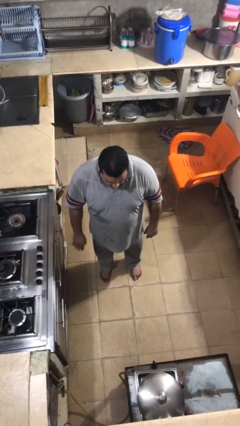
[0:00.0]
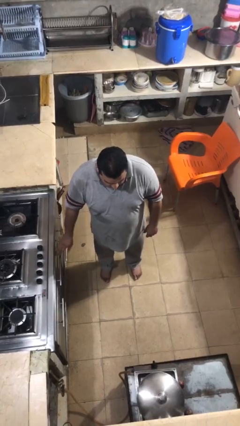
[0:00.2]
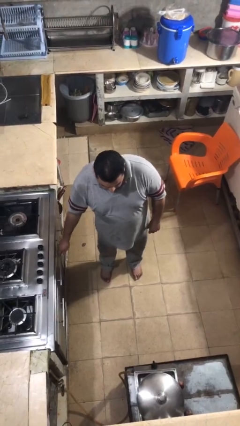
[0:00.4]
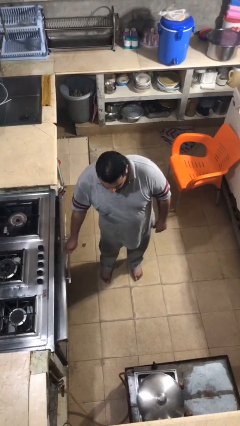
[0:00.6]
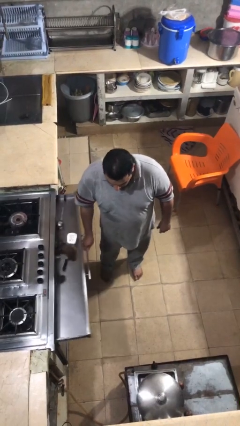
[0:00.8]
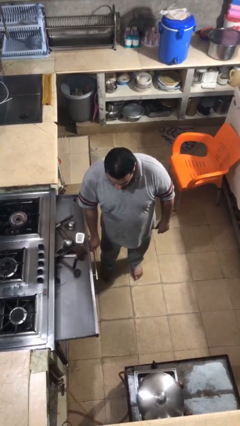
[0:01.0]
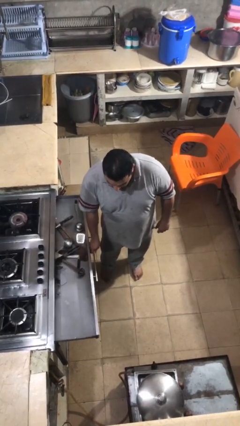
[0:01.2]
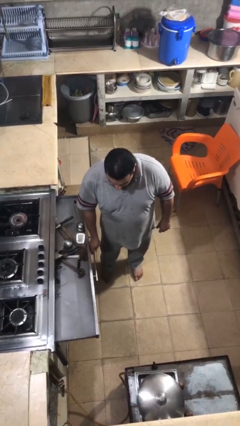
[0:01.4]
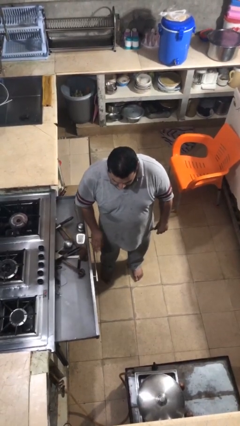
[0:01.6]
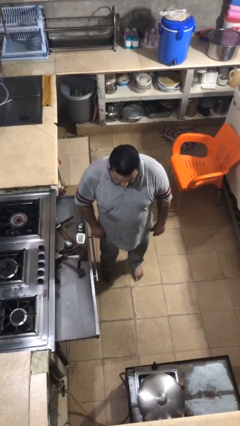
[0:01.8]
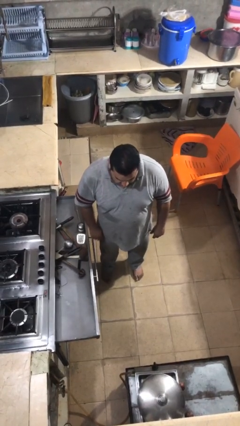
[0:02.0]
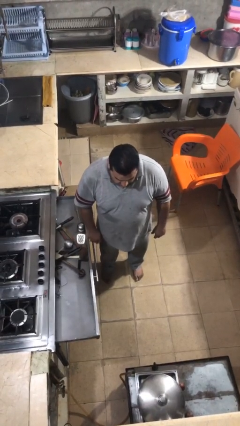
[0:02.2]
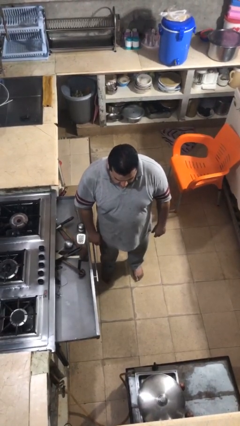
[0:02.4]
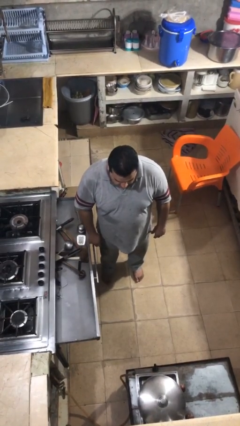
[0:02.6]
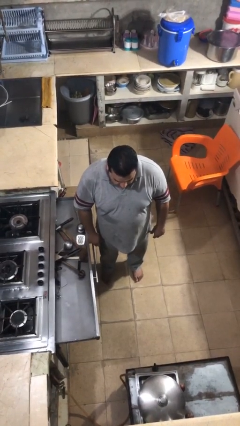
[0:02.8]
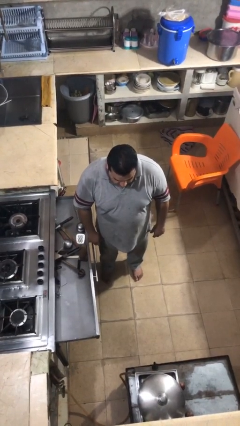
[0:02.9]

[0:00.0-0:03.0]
person opens kitchen drawer

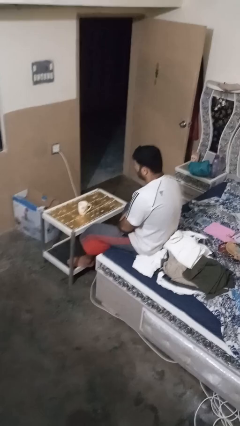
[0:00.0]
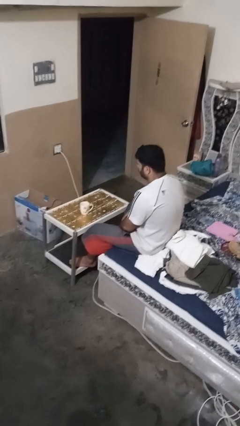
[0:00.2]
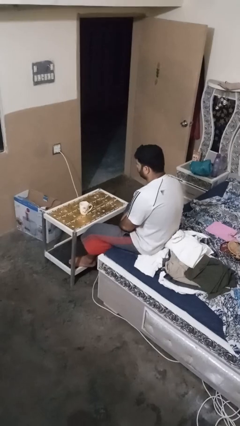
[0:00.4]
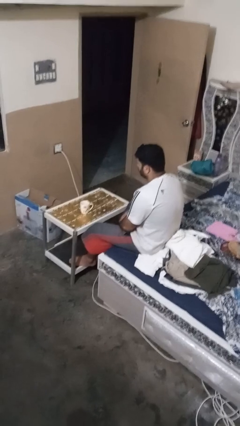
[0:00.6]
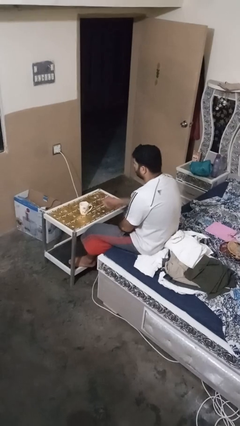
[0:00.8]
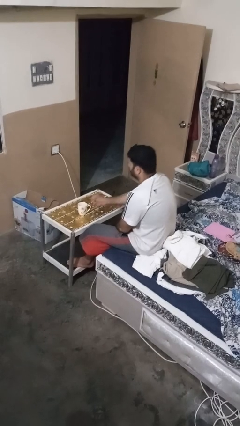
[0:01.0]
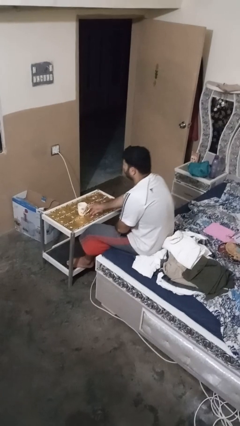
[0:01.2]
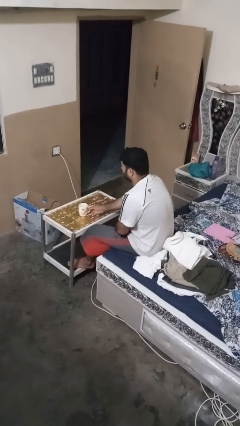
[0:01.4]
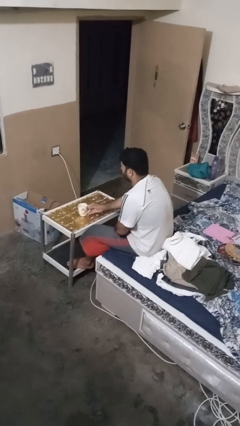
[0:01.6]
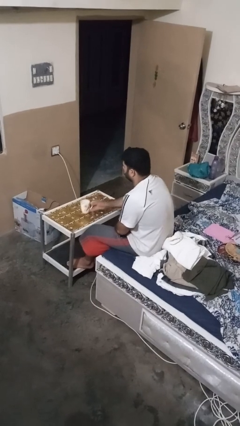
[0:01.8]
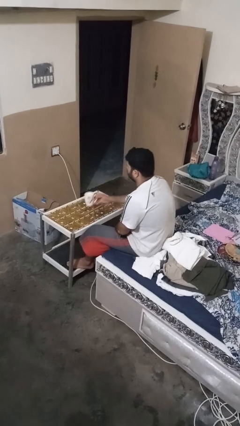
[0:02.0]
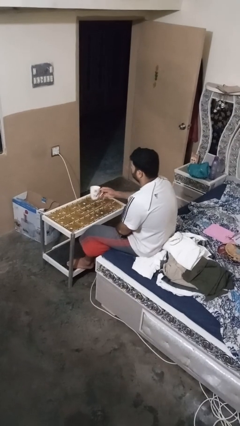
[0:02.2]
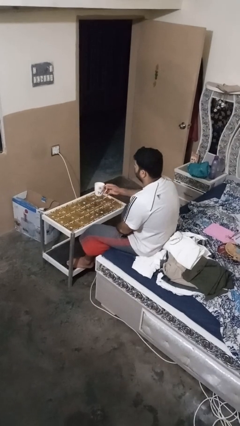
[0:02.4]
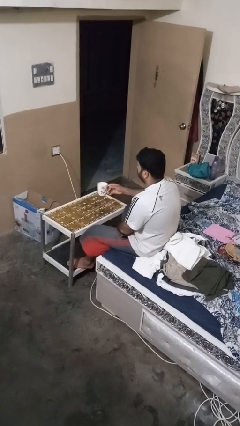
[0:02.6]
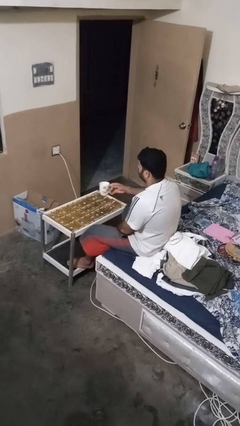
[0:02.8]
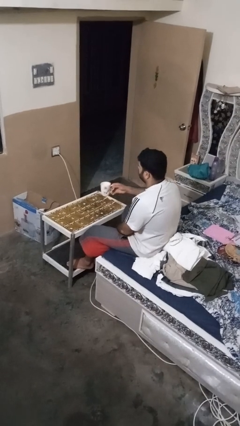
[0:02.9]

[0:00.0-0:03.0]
person picks up object from table

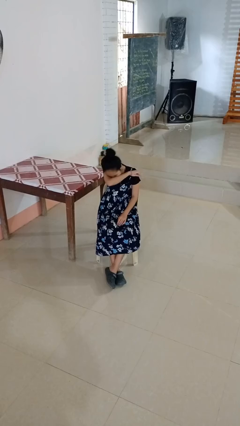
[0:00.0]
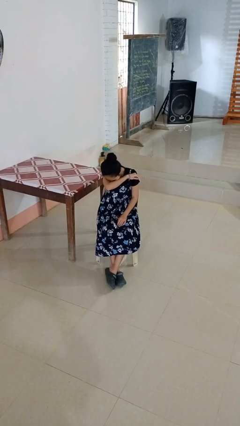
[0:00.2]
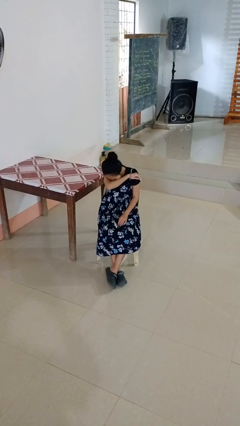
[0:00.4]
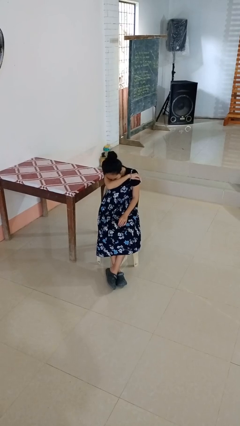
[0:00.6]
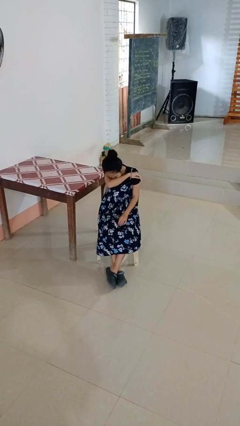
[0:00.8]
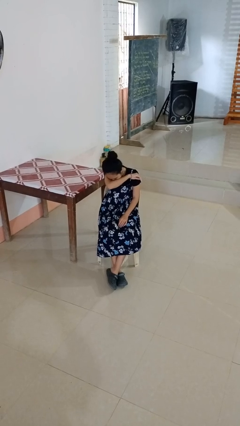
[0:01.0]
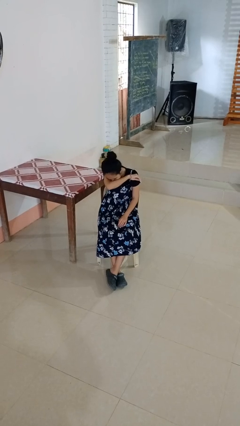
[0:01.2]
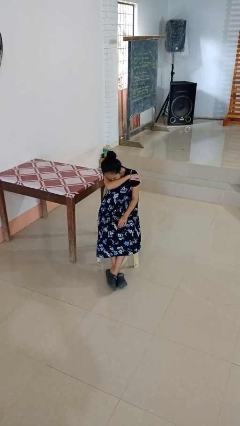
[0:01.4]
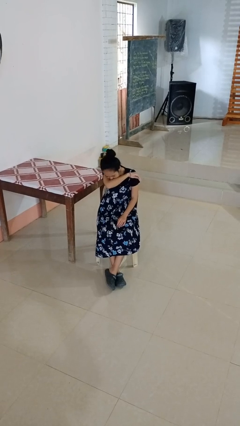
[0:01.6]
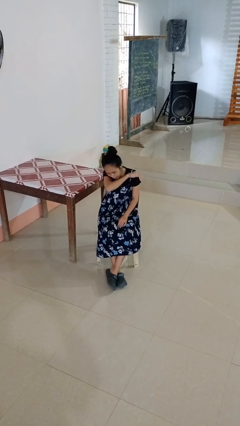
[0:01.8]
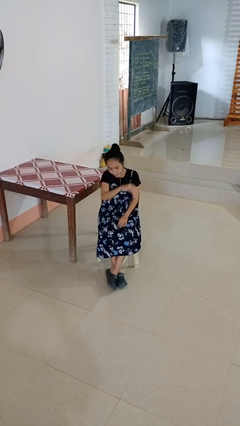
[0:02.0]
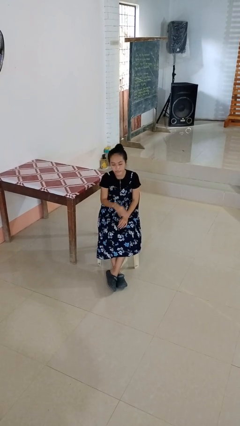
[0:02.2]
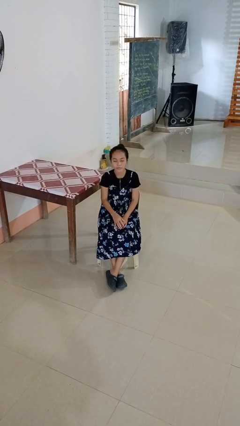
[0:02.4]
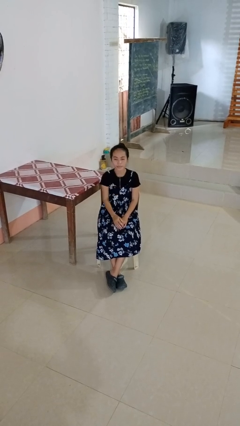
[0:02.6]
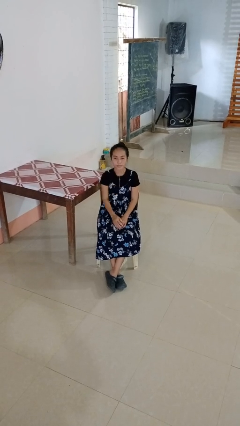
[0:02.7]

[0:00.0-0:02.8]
person sneezes into arm

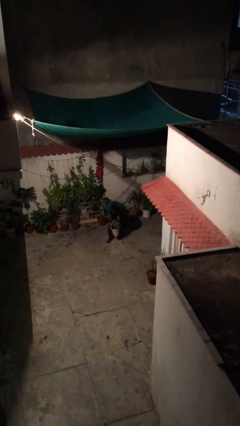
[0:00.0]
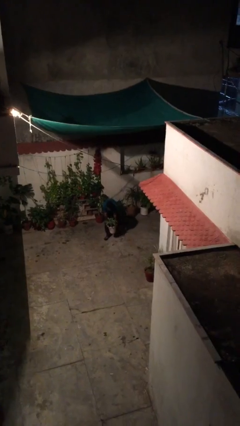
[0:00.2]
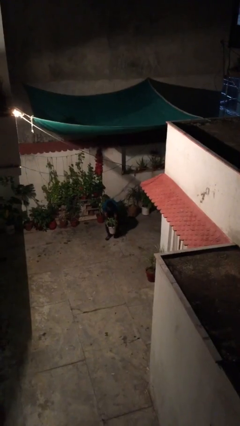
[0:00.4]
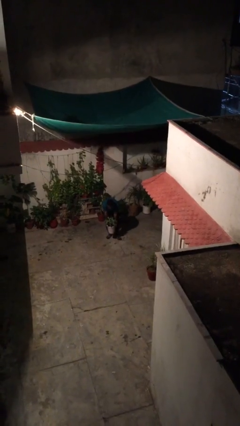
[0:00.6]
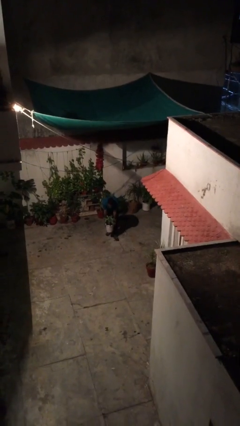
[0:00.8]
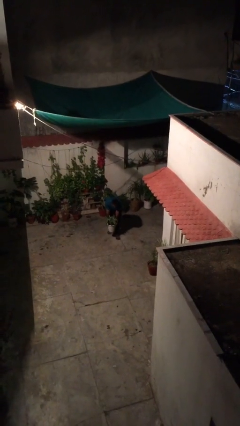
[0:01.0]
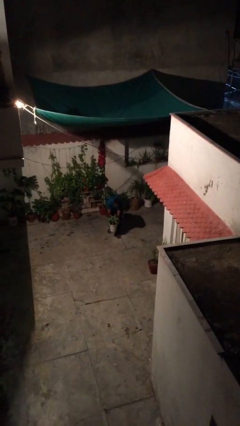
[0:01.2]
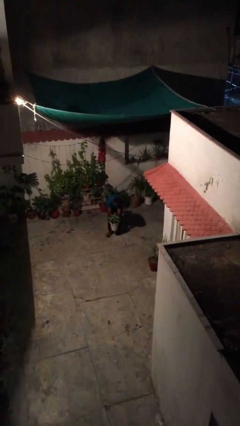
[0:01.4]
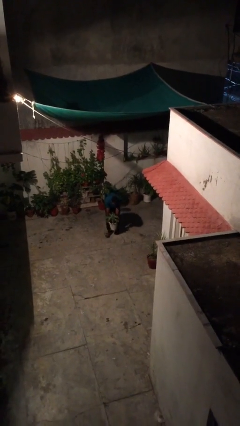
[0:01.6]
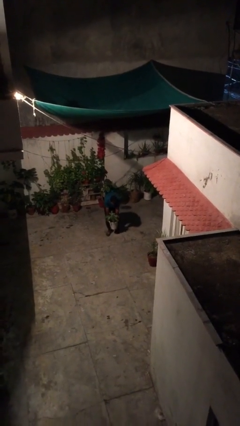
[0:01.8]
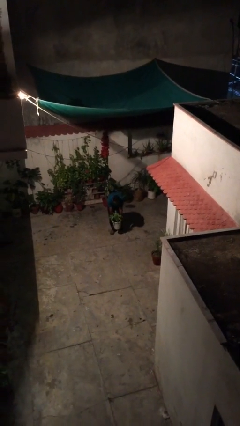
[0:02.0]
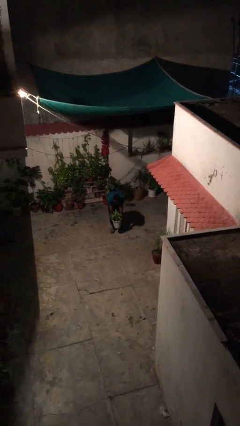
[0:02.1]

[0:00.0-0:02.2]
person carries heavy object

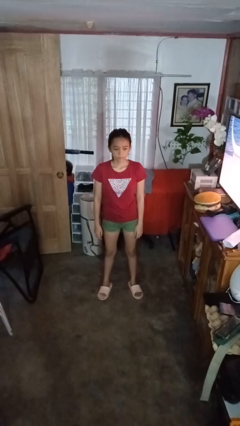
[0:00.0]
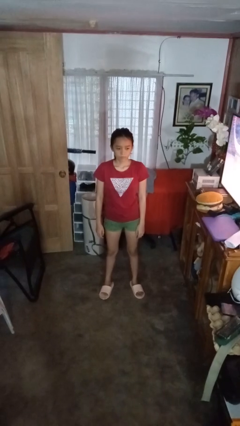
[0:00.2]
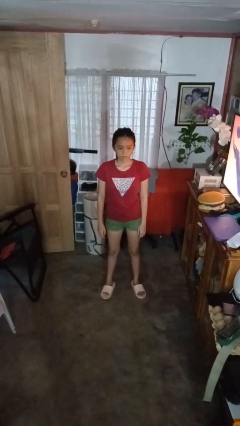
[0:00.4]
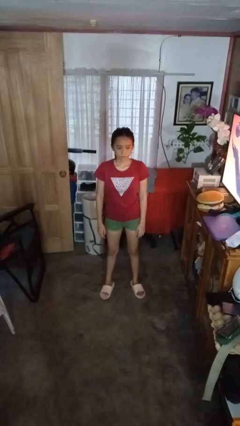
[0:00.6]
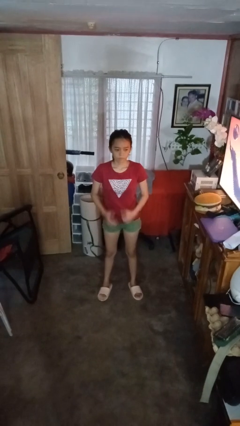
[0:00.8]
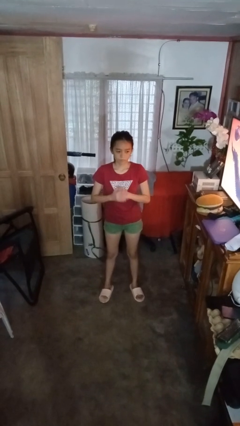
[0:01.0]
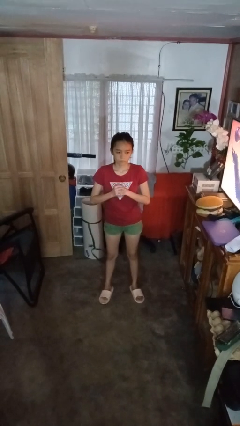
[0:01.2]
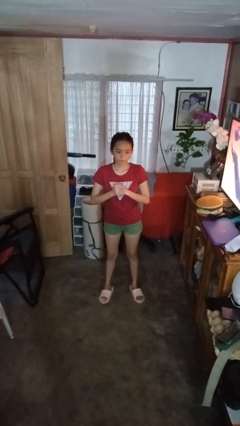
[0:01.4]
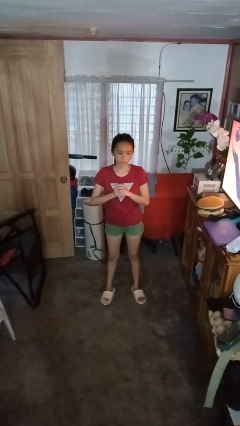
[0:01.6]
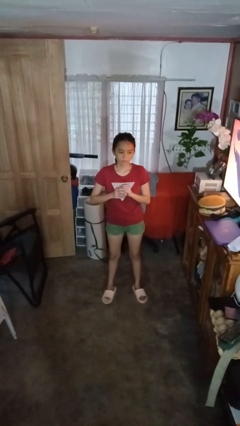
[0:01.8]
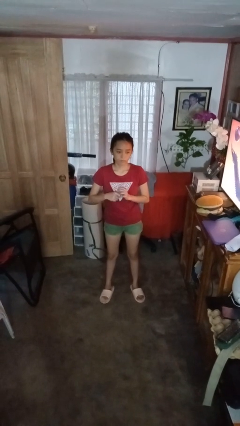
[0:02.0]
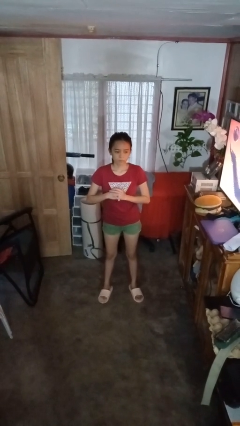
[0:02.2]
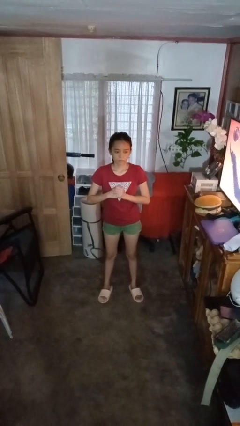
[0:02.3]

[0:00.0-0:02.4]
person cracks knuckles

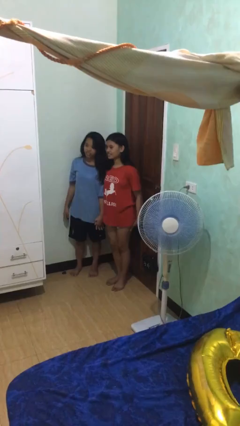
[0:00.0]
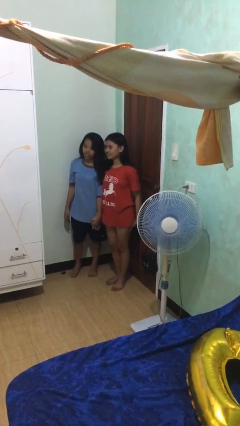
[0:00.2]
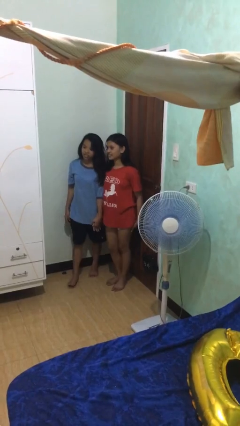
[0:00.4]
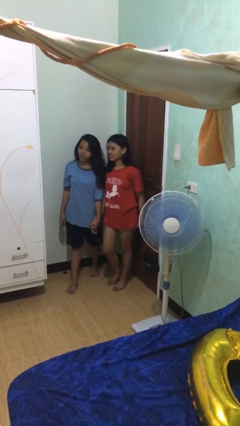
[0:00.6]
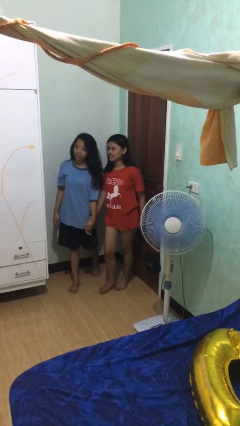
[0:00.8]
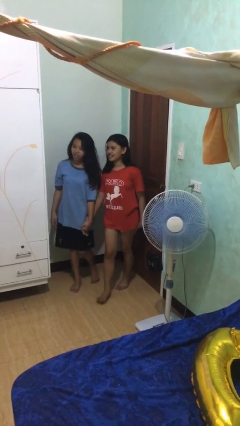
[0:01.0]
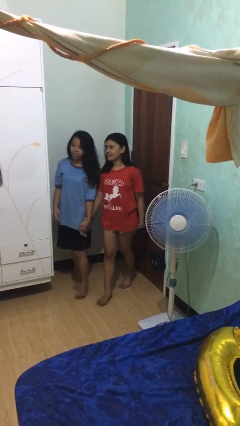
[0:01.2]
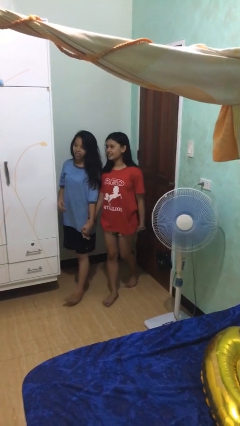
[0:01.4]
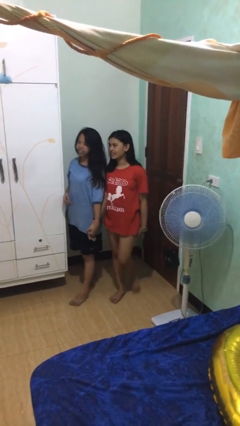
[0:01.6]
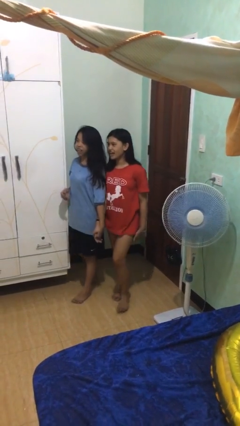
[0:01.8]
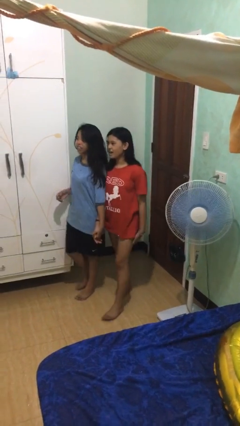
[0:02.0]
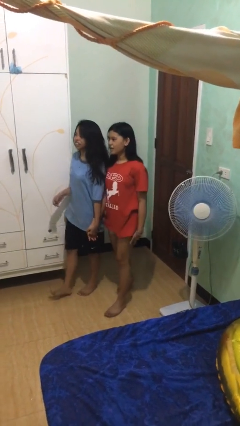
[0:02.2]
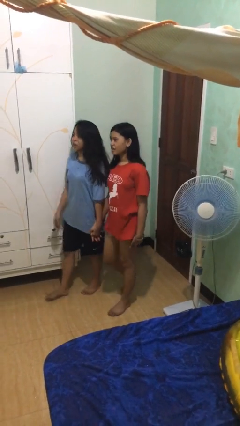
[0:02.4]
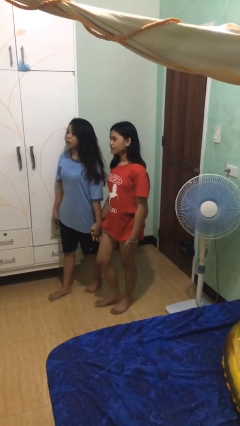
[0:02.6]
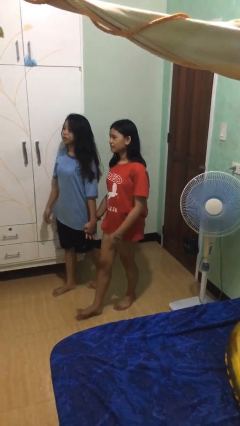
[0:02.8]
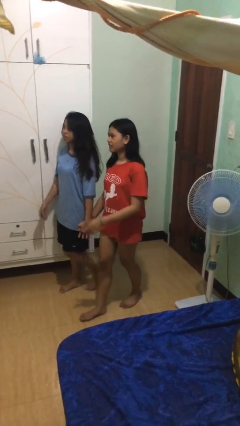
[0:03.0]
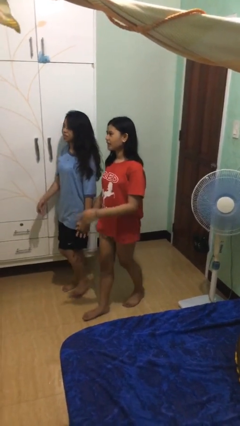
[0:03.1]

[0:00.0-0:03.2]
person holds hand

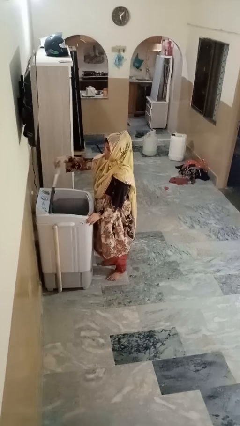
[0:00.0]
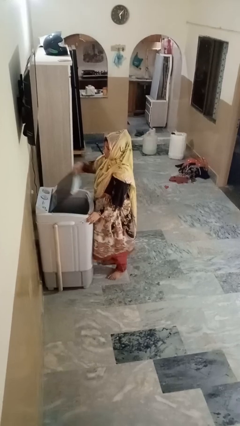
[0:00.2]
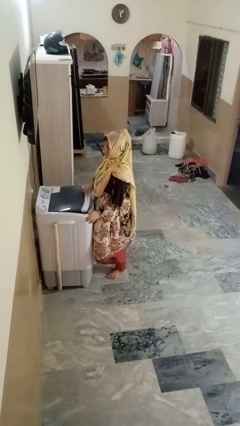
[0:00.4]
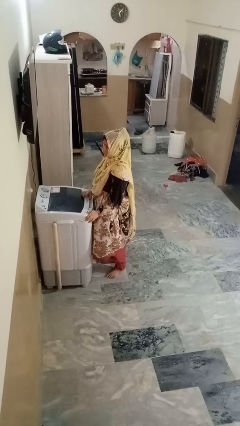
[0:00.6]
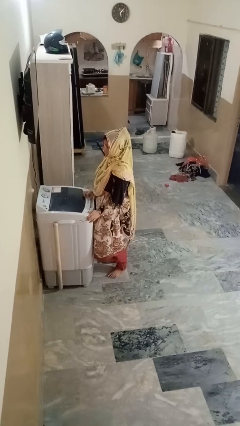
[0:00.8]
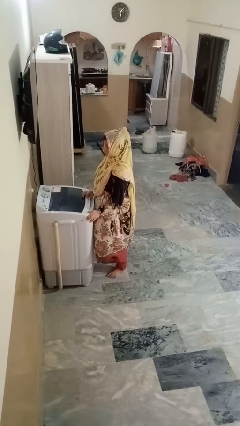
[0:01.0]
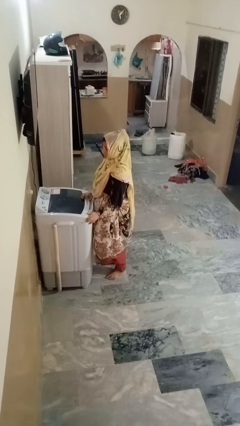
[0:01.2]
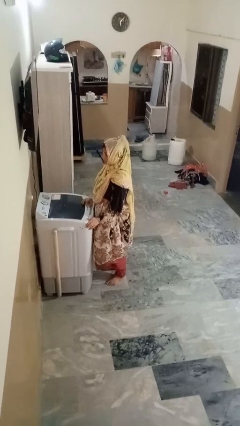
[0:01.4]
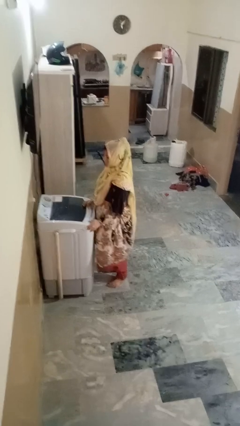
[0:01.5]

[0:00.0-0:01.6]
person closes clothes washer
